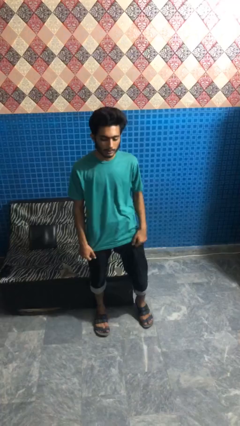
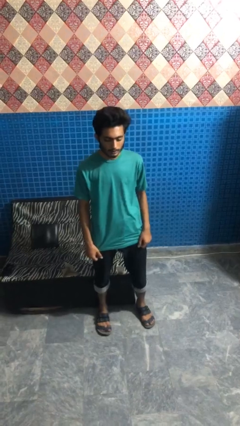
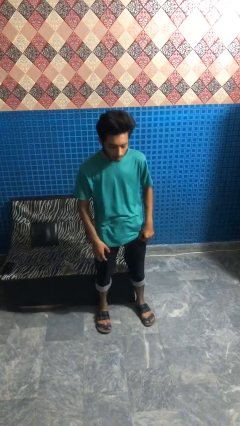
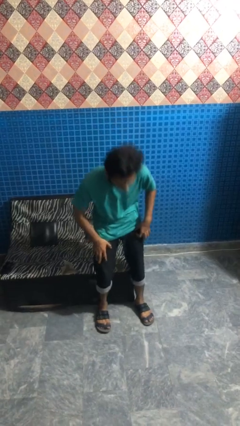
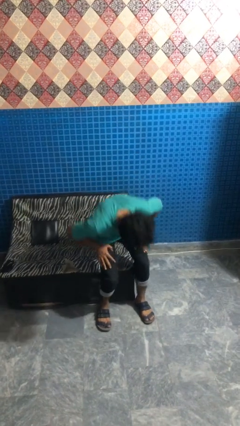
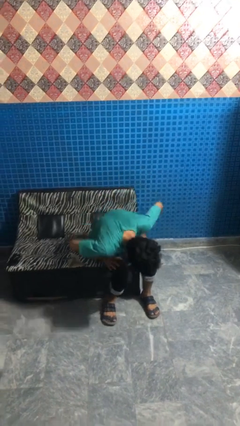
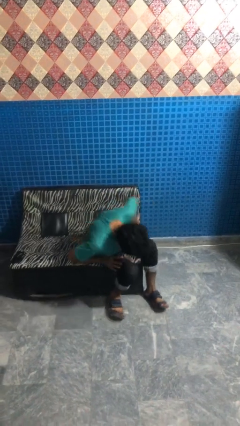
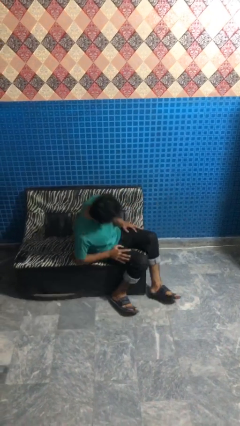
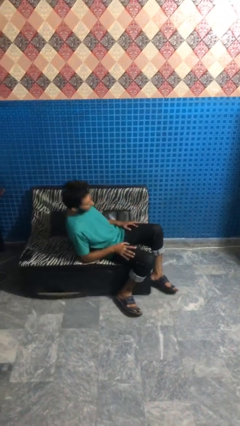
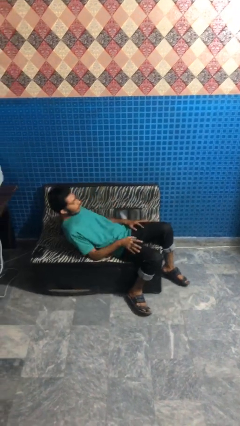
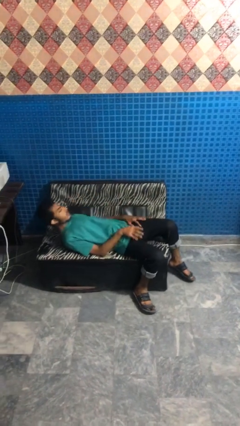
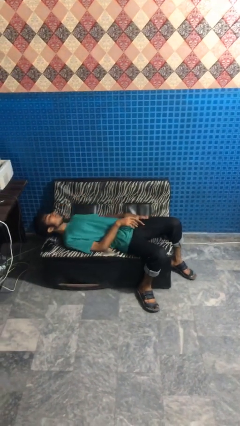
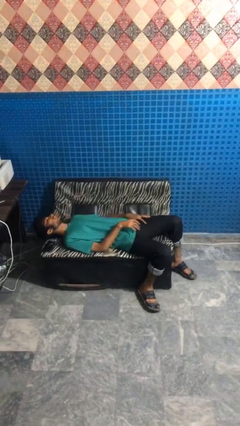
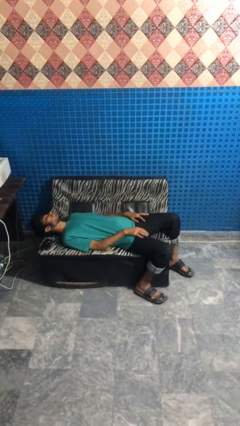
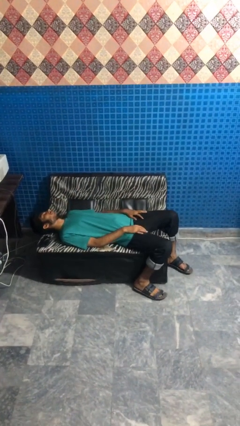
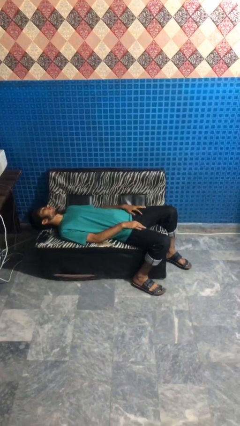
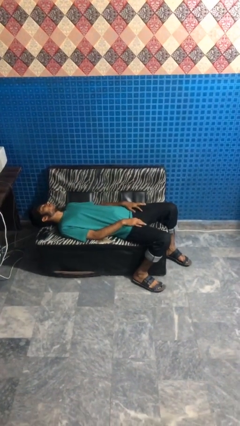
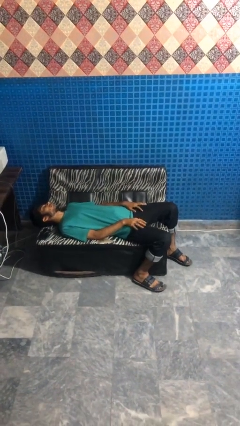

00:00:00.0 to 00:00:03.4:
person lies down on couch

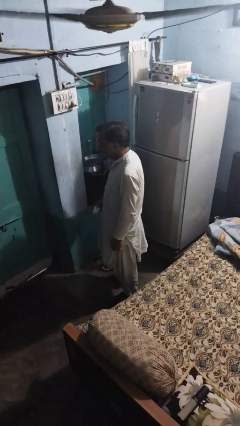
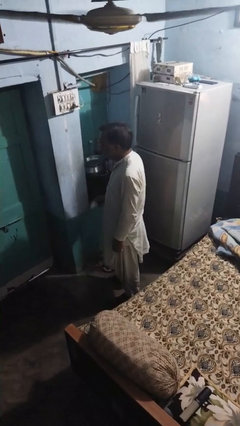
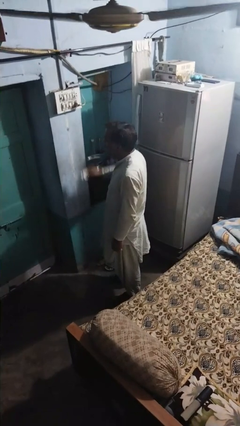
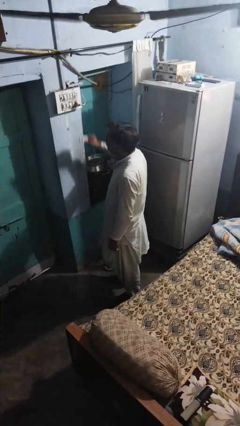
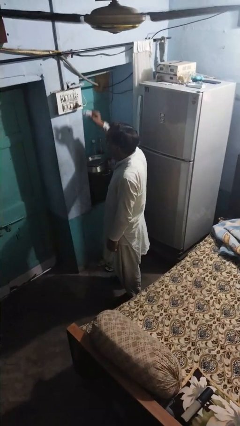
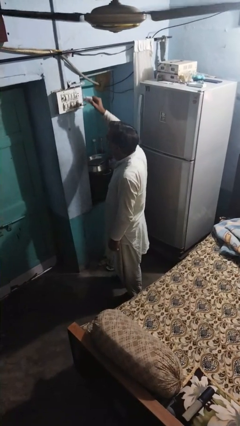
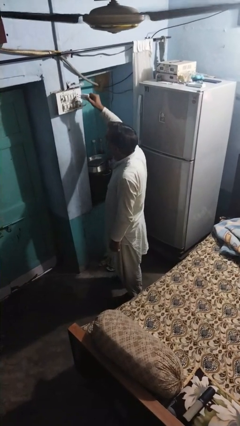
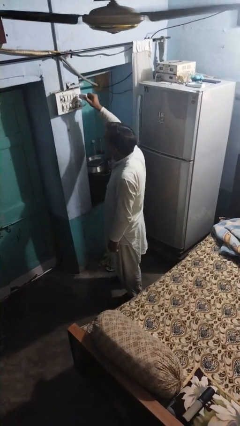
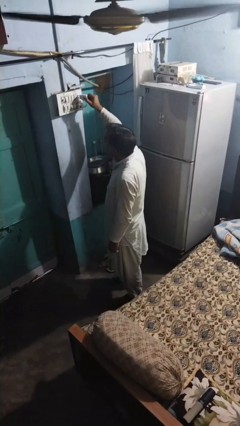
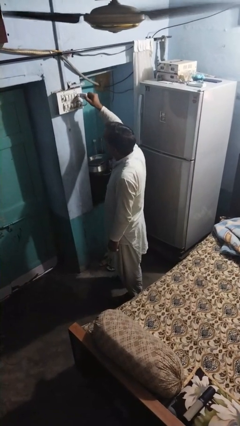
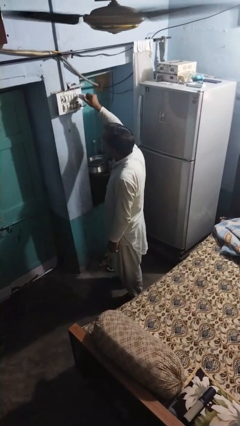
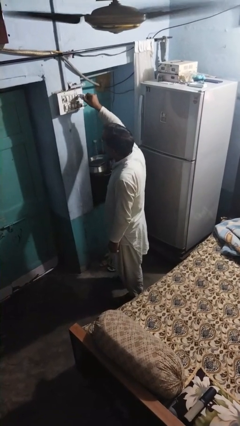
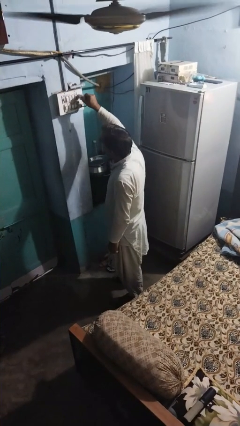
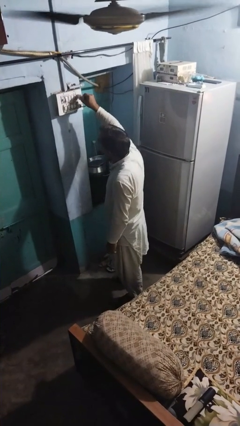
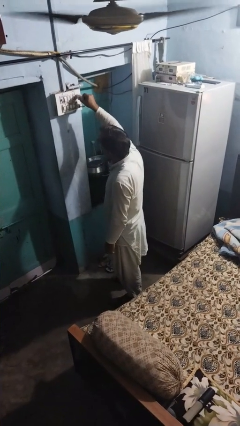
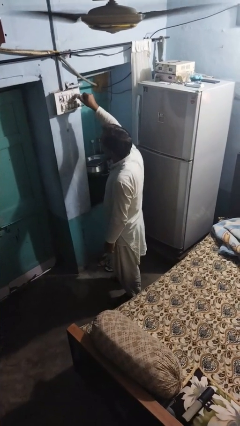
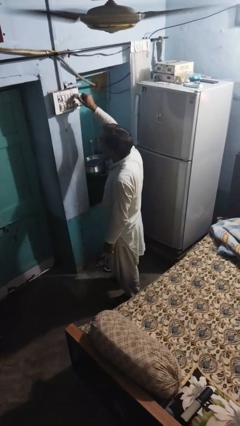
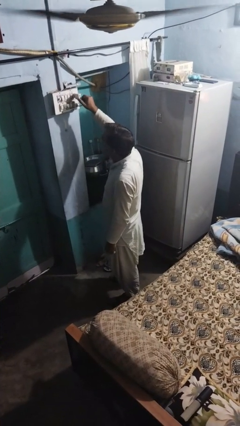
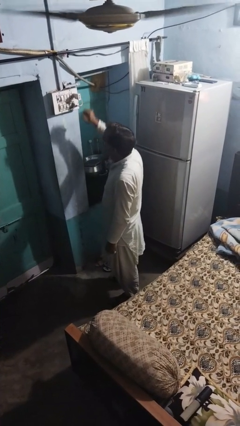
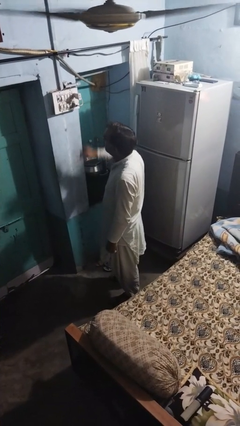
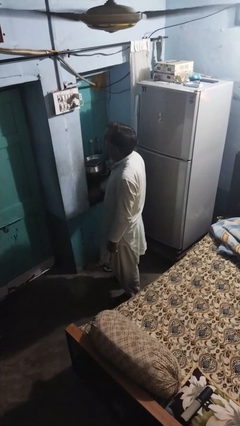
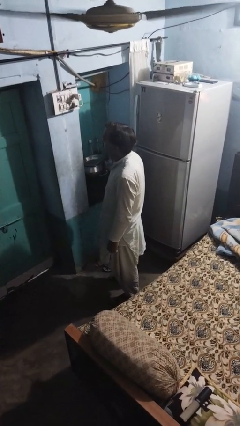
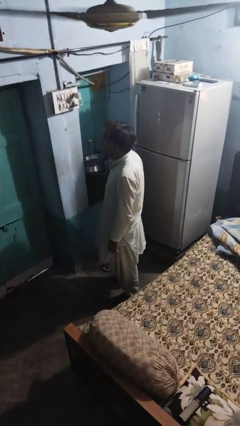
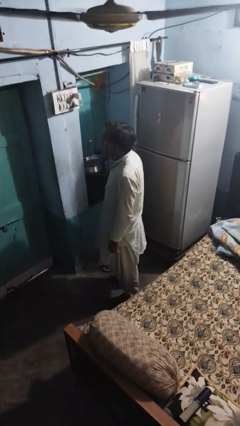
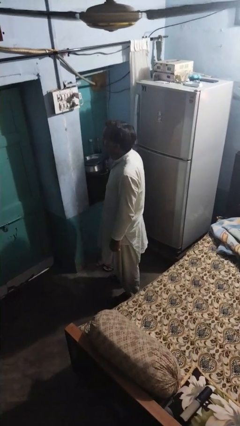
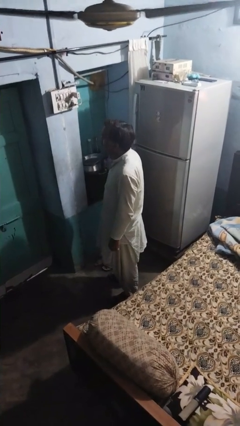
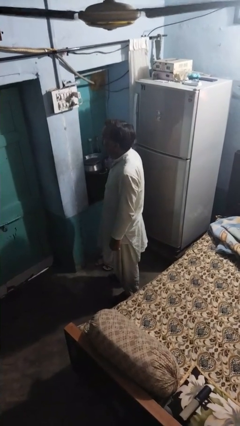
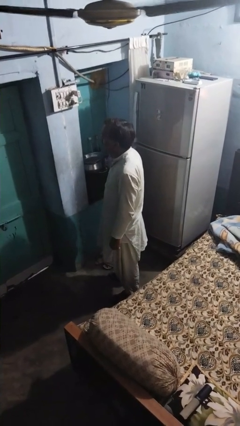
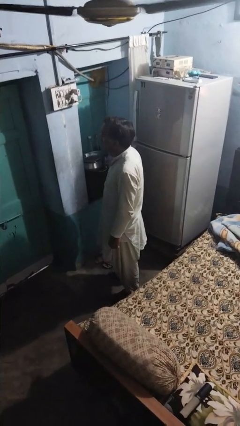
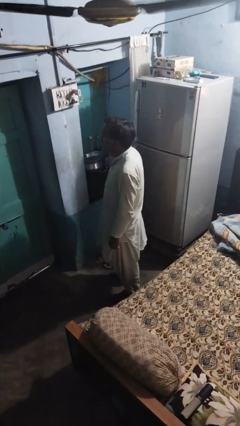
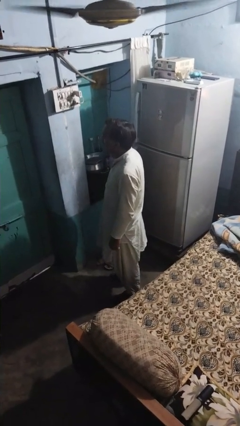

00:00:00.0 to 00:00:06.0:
person plugs into electrical socket

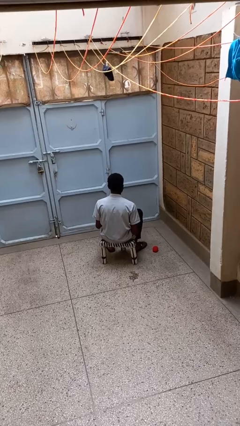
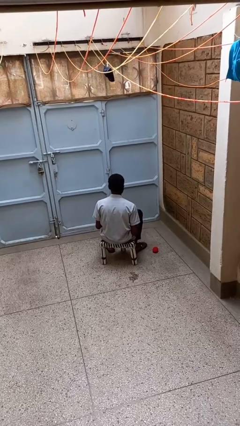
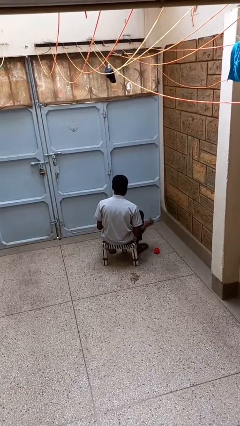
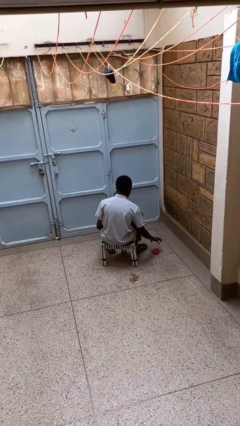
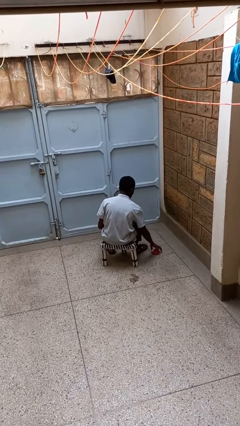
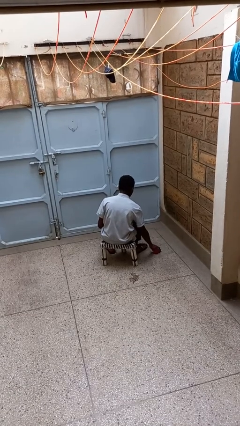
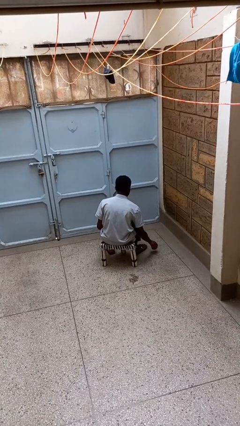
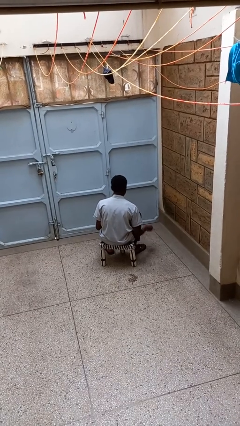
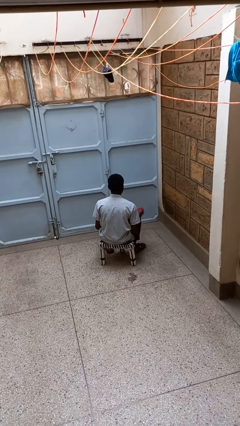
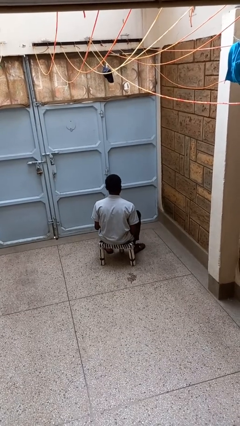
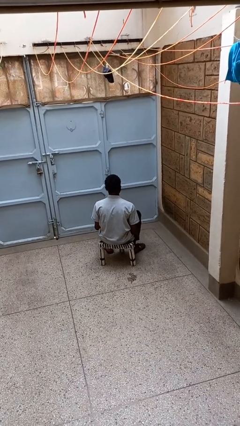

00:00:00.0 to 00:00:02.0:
person picks up object from floor

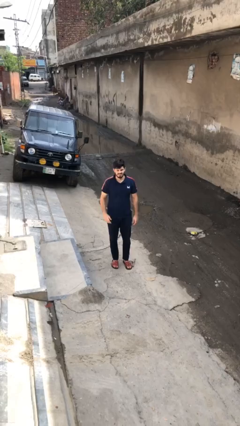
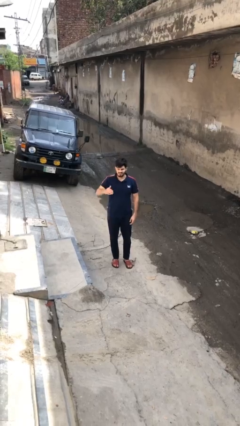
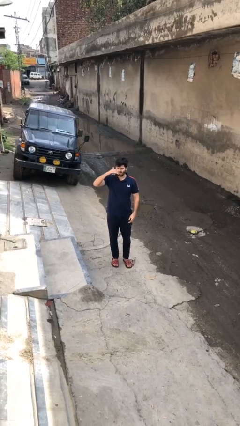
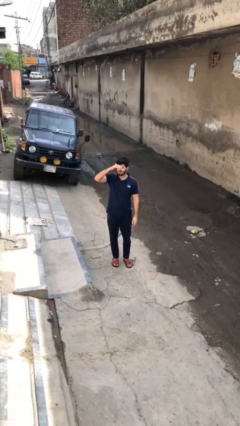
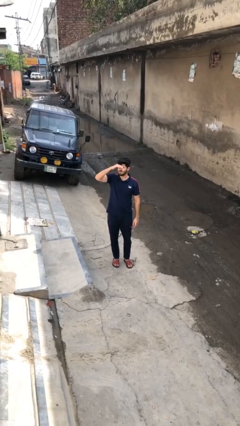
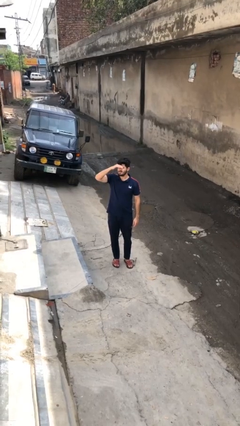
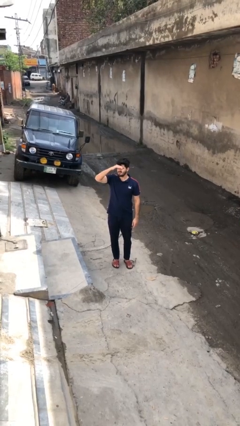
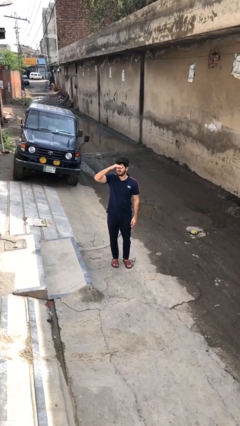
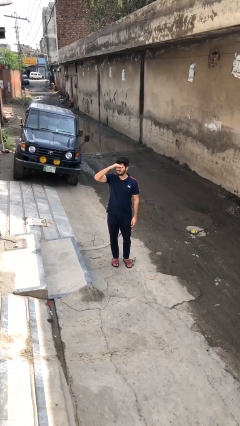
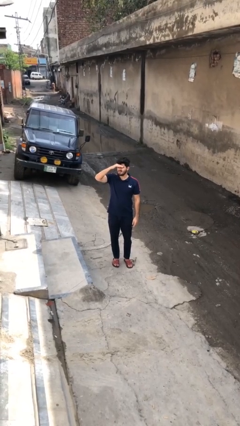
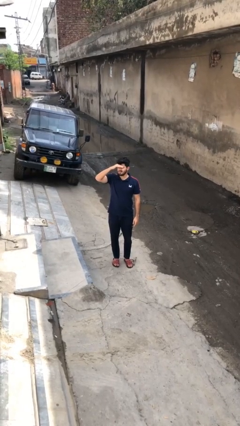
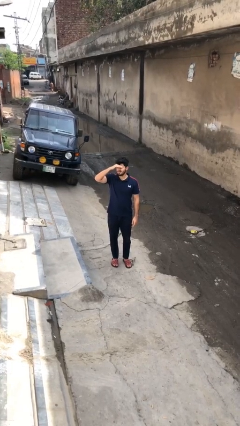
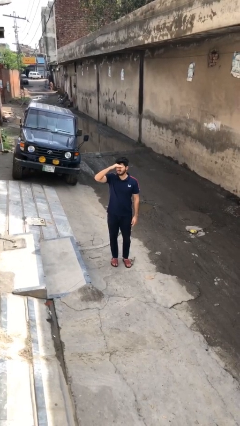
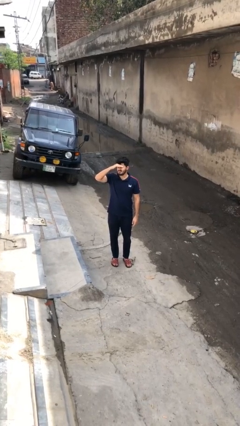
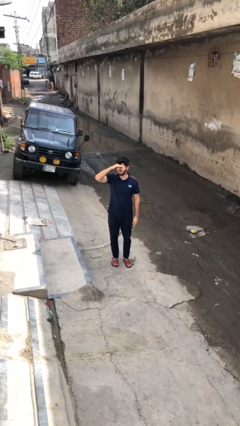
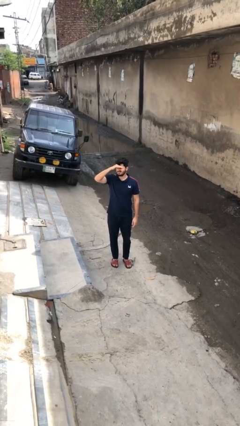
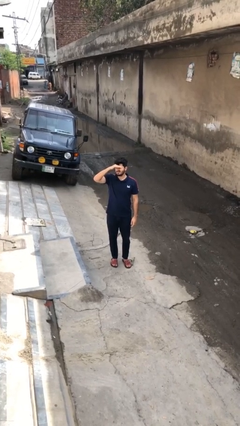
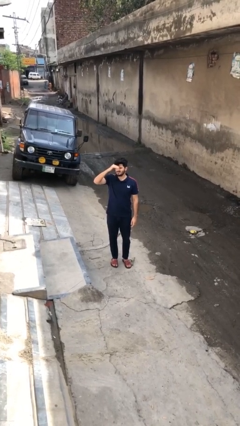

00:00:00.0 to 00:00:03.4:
person shades eyes

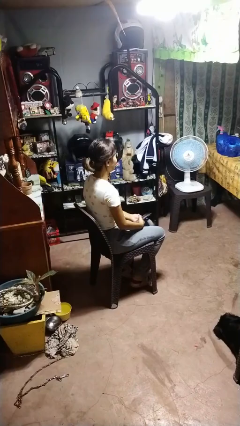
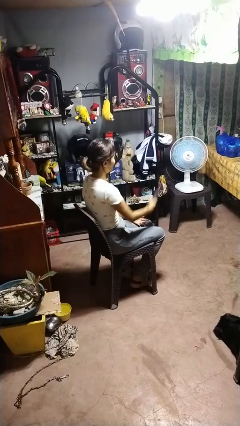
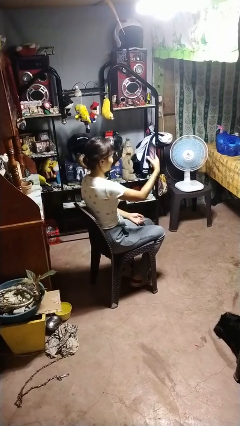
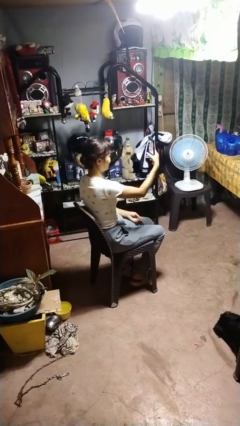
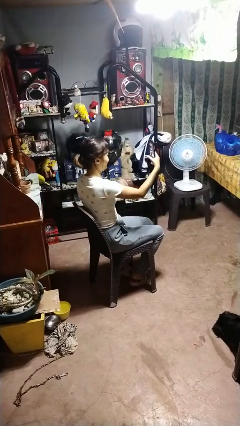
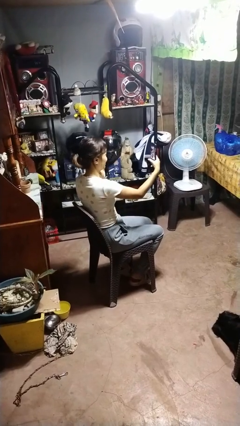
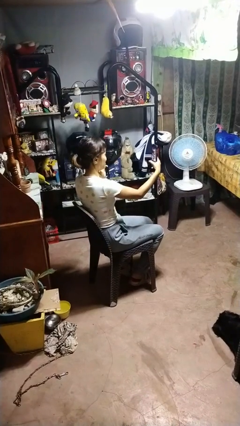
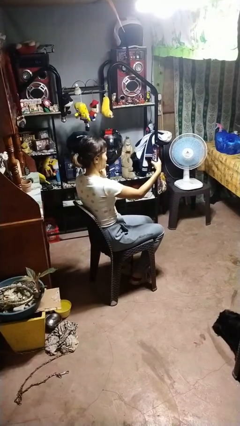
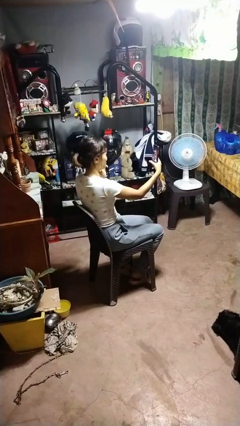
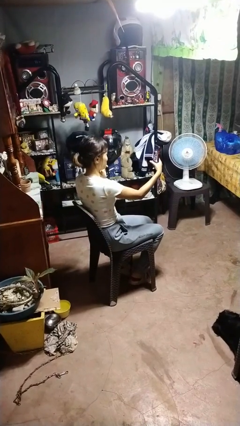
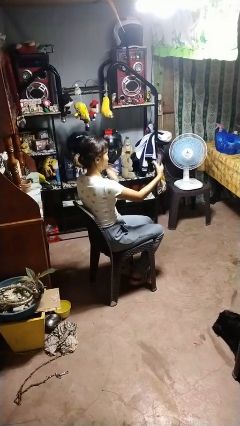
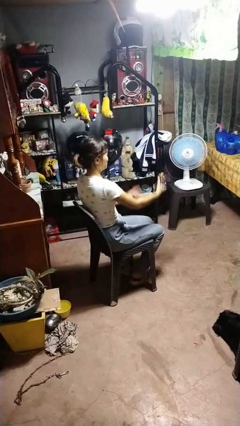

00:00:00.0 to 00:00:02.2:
person takes selfie

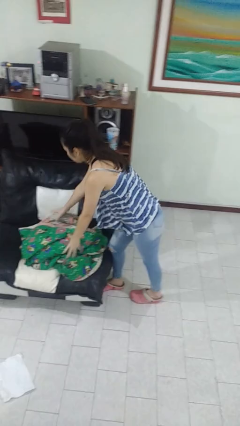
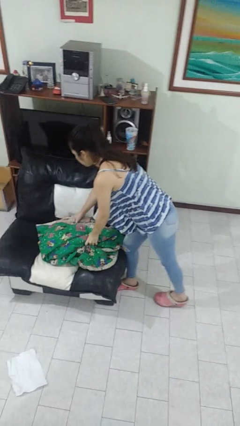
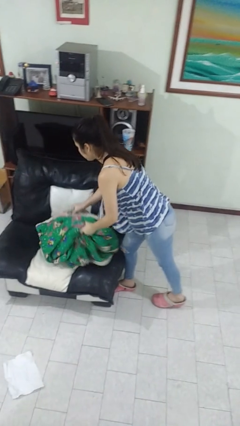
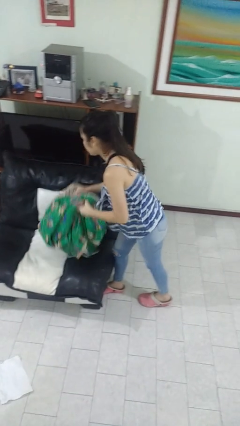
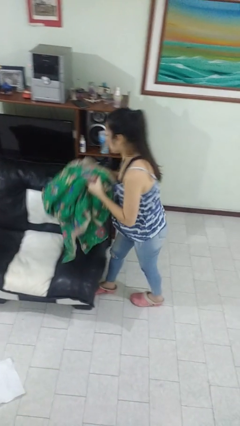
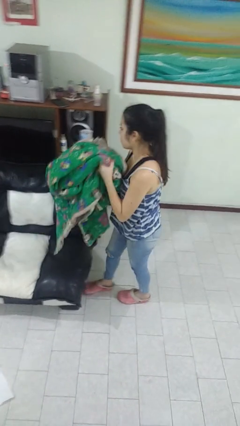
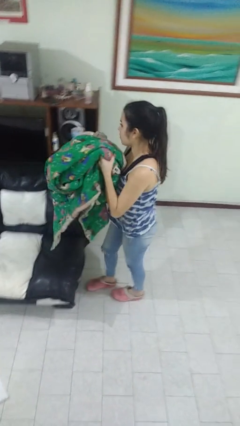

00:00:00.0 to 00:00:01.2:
person picks up object from couch
